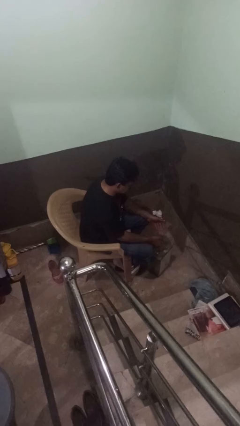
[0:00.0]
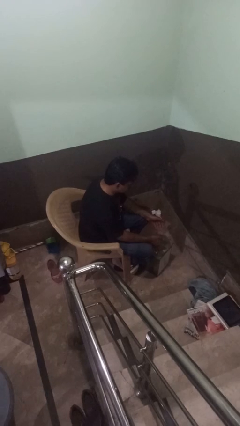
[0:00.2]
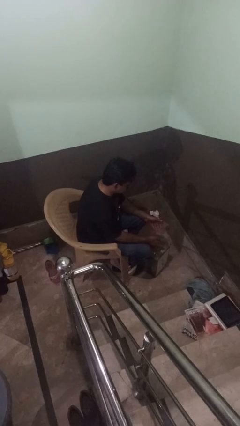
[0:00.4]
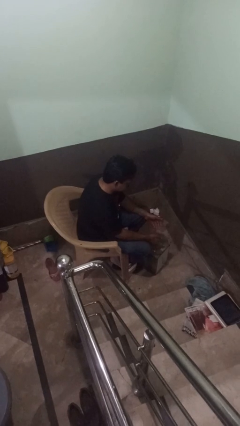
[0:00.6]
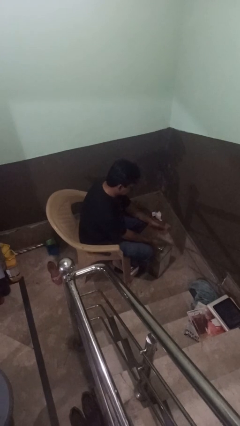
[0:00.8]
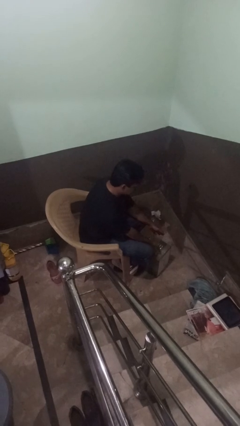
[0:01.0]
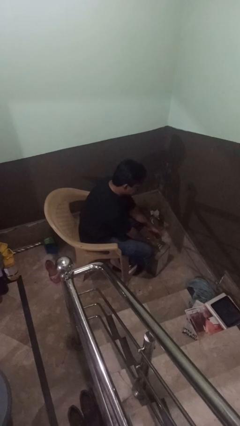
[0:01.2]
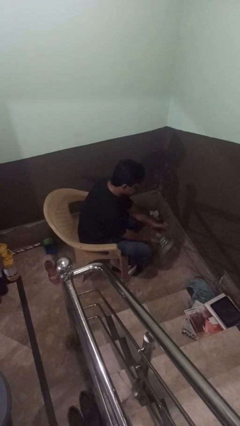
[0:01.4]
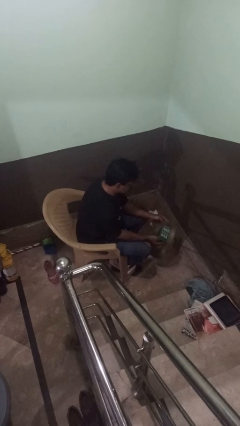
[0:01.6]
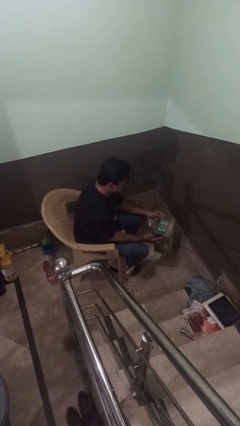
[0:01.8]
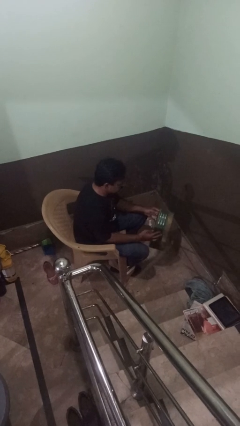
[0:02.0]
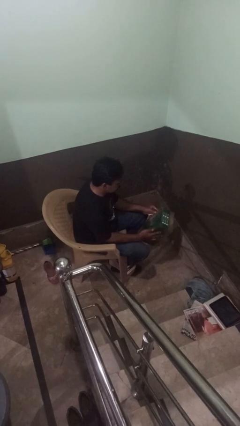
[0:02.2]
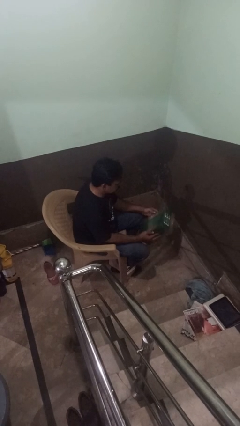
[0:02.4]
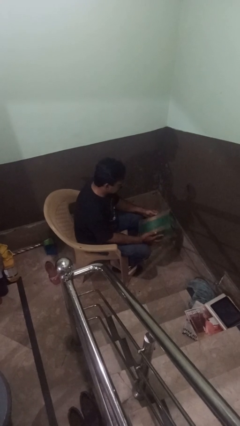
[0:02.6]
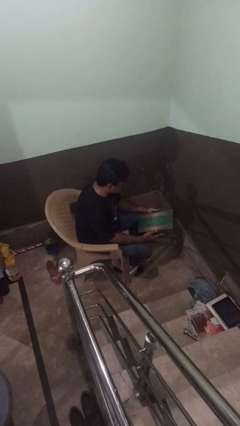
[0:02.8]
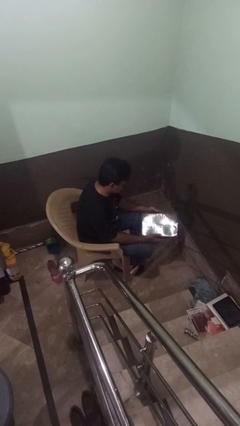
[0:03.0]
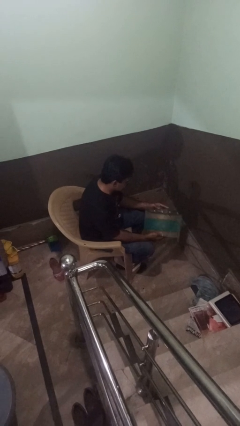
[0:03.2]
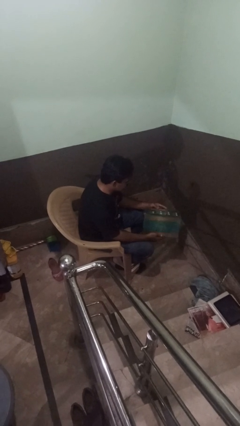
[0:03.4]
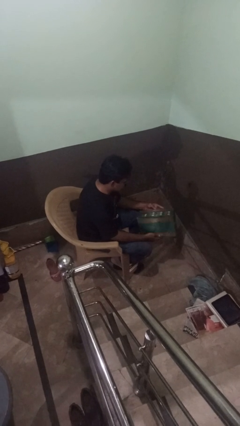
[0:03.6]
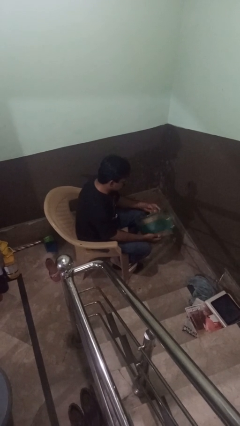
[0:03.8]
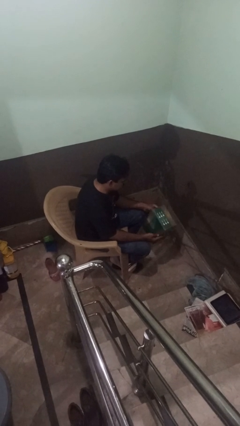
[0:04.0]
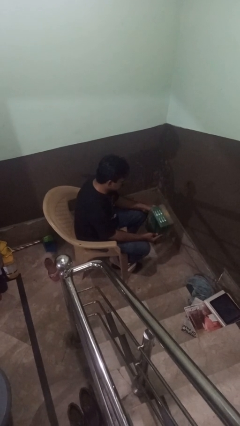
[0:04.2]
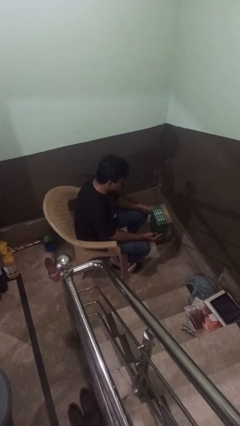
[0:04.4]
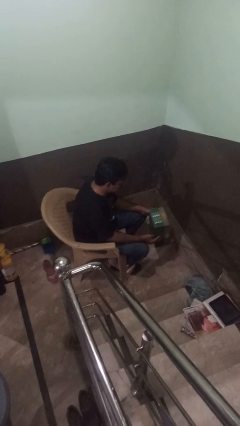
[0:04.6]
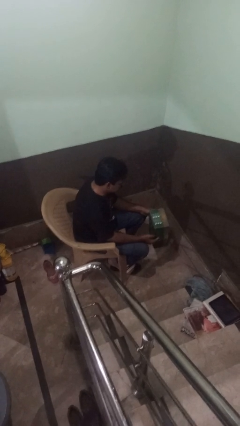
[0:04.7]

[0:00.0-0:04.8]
person picks up object from floor

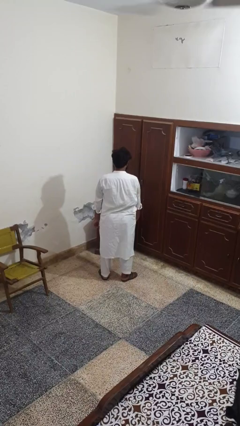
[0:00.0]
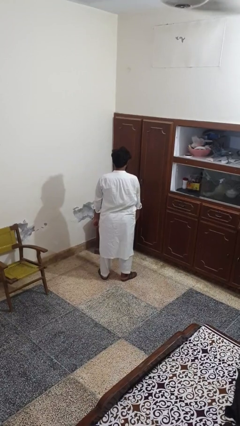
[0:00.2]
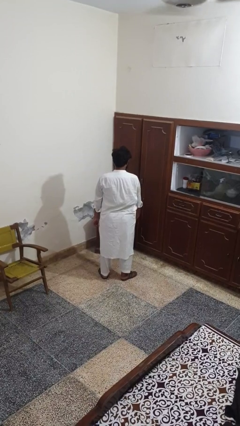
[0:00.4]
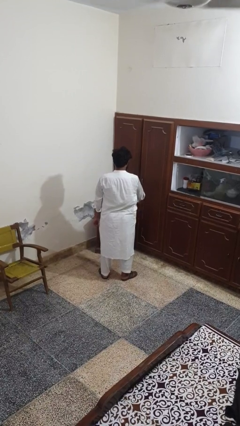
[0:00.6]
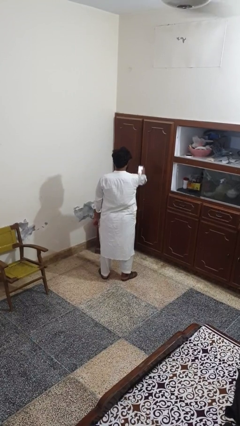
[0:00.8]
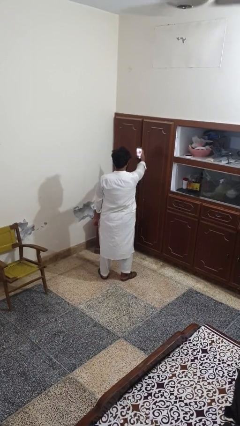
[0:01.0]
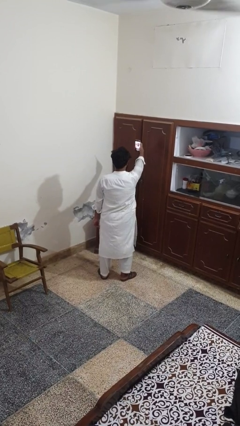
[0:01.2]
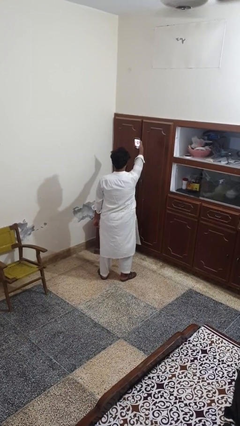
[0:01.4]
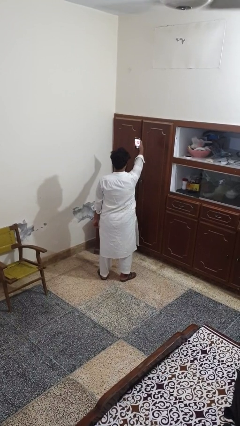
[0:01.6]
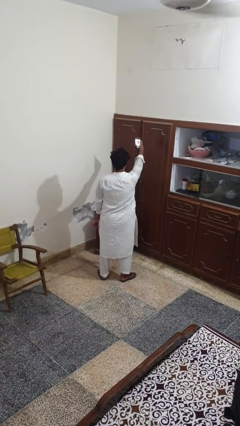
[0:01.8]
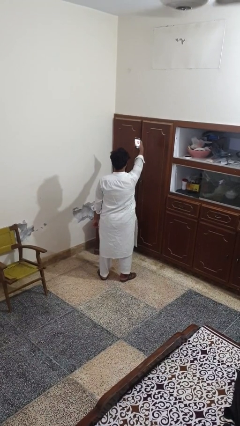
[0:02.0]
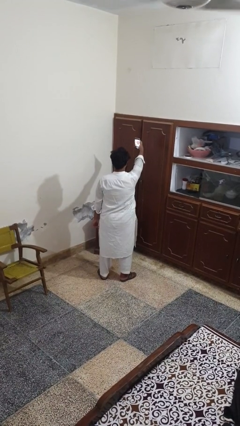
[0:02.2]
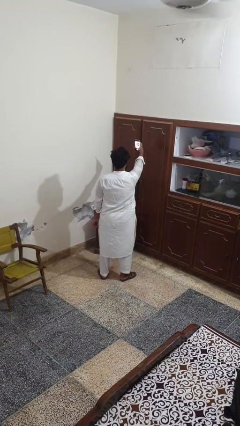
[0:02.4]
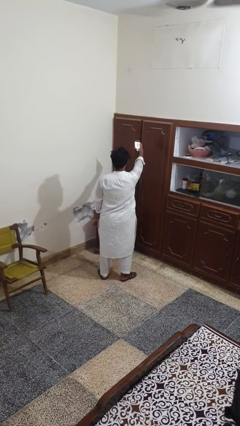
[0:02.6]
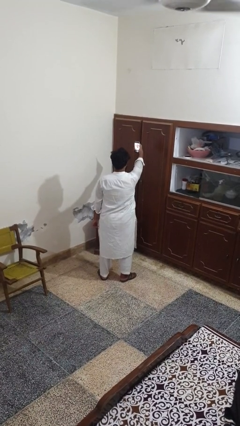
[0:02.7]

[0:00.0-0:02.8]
person takes selfie

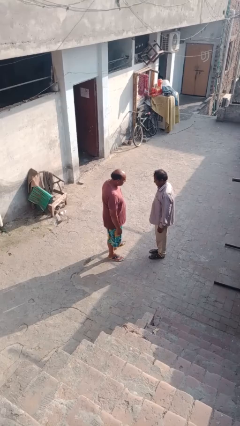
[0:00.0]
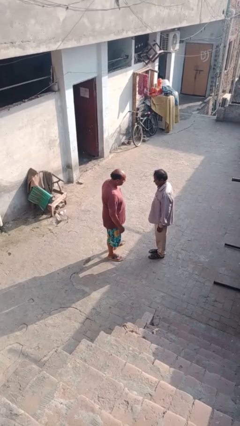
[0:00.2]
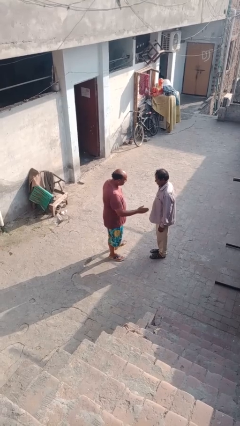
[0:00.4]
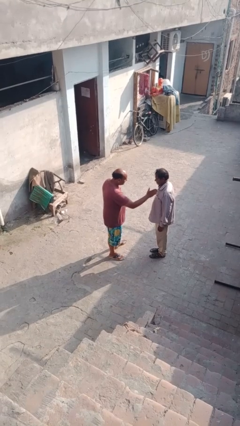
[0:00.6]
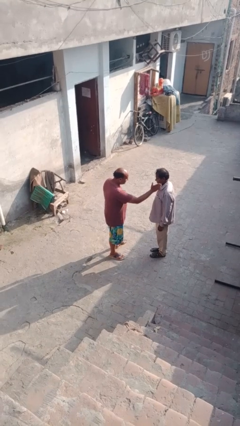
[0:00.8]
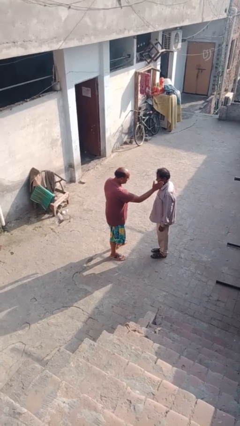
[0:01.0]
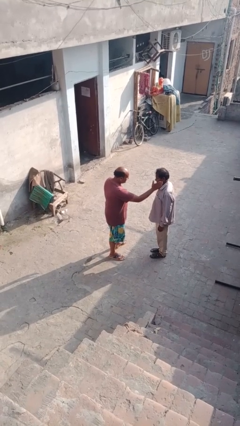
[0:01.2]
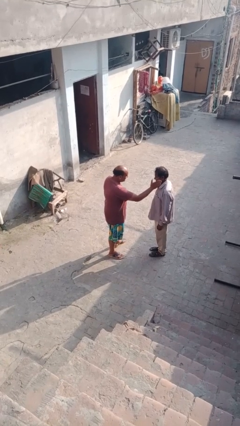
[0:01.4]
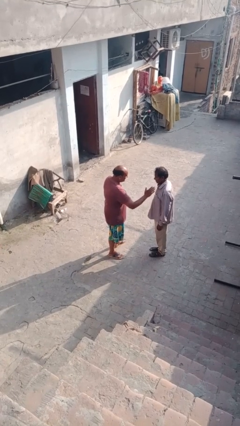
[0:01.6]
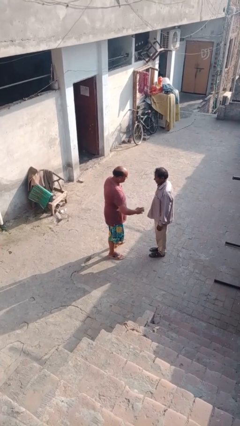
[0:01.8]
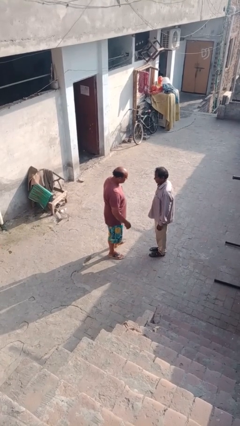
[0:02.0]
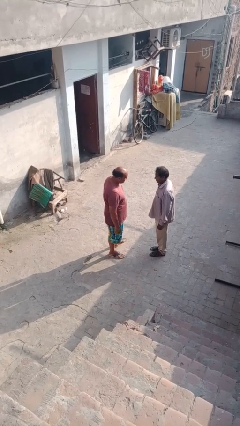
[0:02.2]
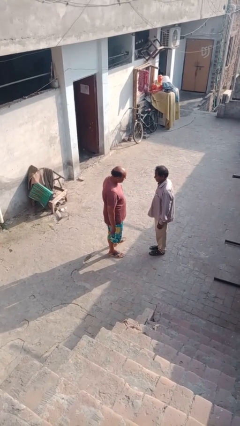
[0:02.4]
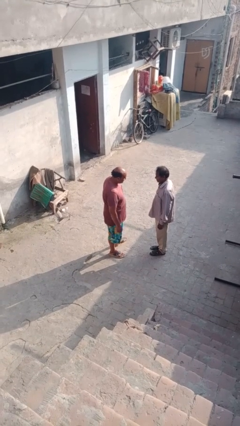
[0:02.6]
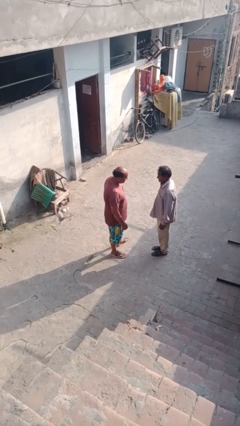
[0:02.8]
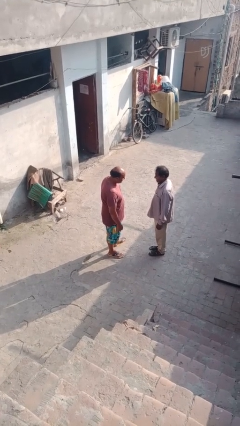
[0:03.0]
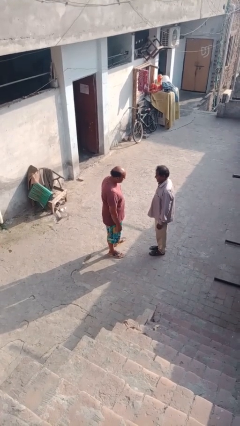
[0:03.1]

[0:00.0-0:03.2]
person touches face of person

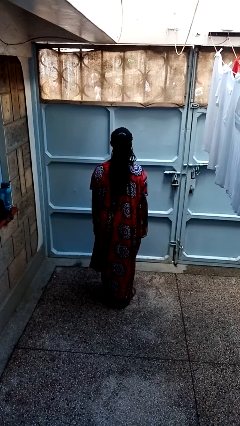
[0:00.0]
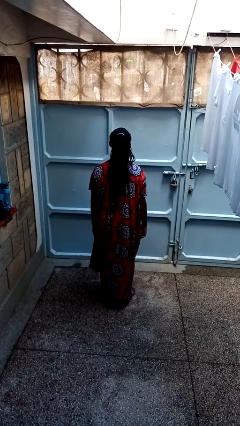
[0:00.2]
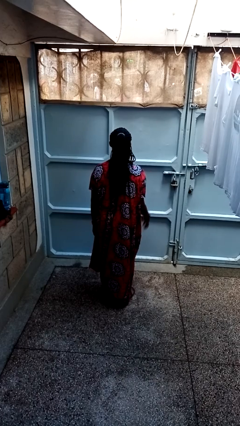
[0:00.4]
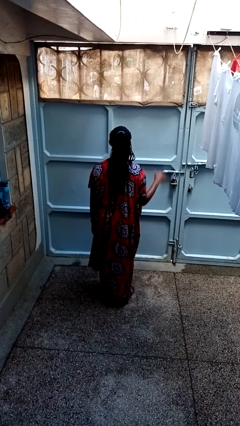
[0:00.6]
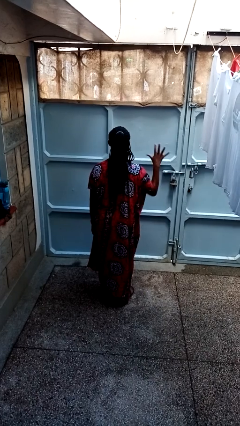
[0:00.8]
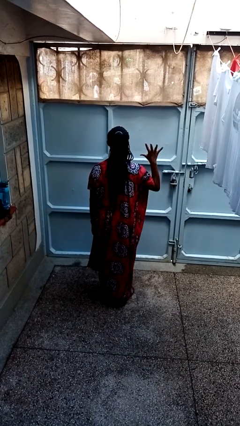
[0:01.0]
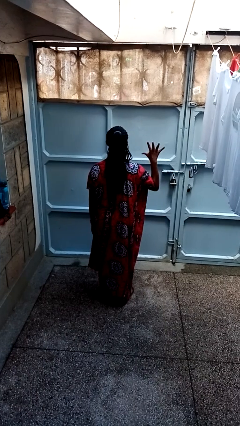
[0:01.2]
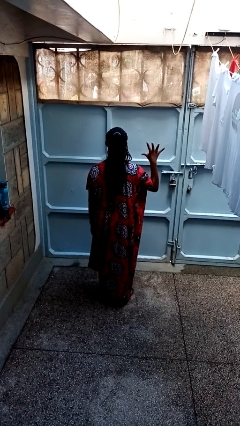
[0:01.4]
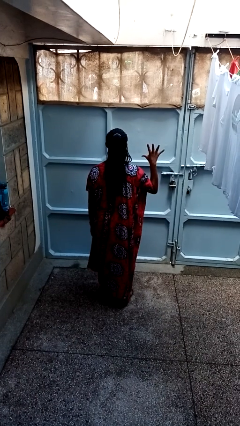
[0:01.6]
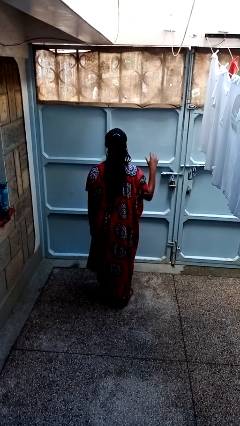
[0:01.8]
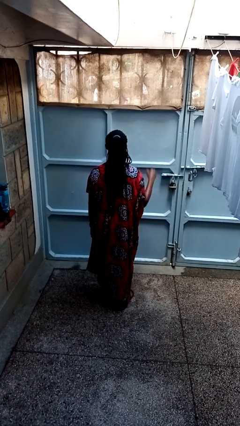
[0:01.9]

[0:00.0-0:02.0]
person gestures number five

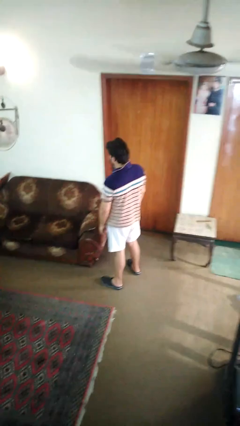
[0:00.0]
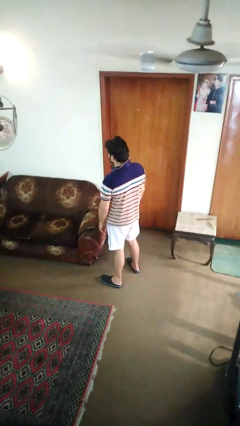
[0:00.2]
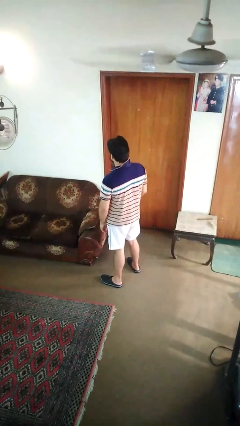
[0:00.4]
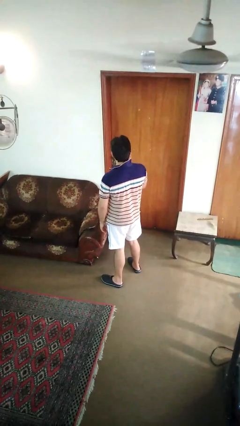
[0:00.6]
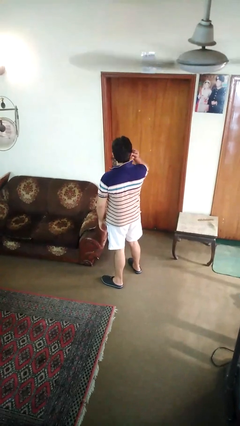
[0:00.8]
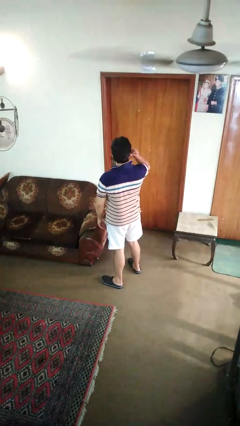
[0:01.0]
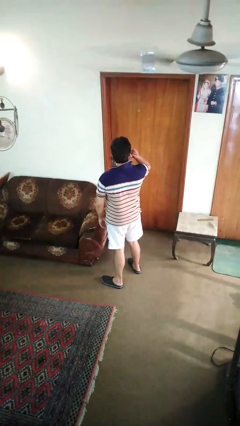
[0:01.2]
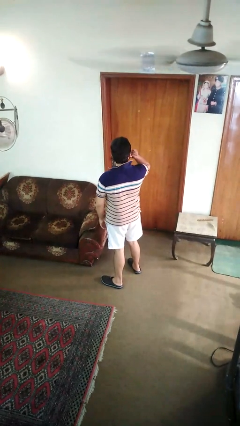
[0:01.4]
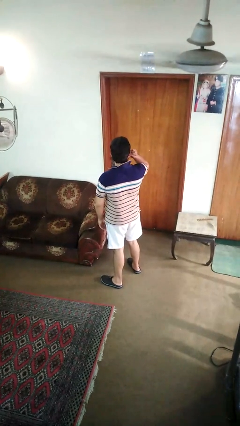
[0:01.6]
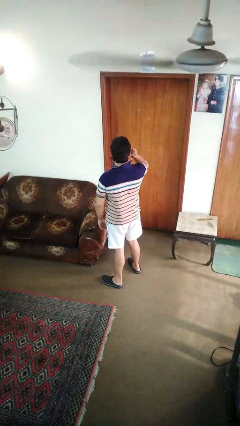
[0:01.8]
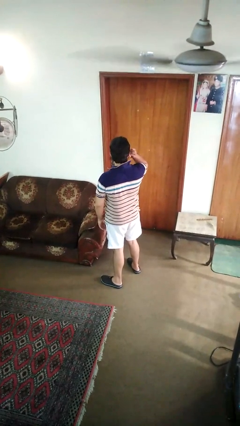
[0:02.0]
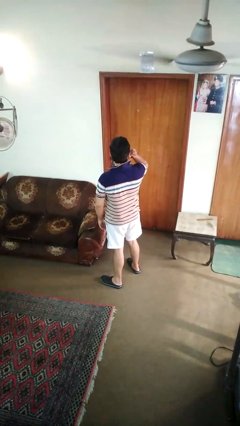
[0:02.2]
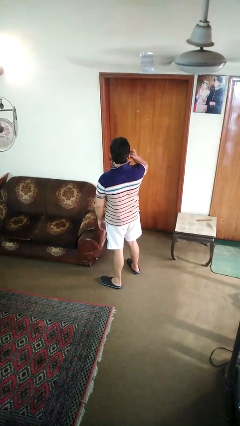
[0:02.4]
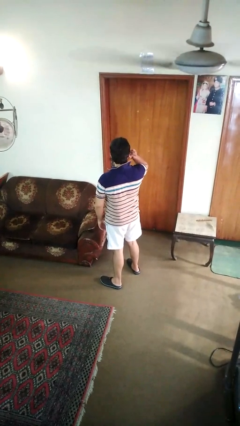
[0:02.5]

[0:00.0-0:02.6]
person touches earlobe

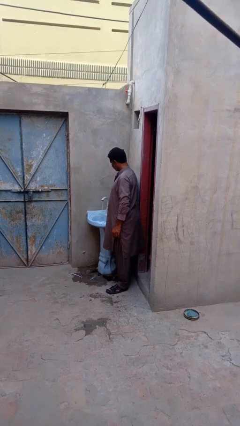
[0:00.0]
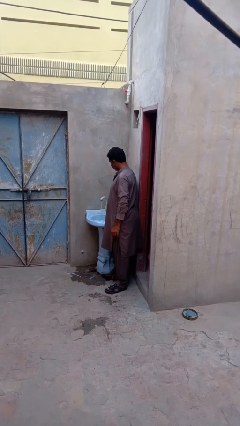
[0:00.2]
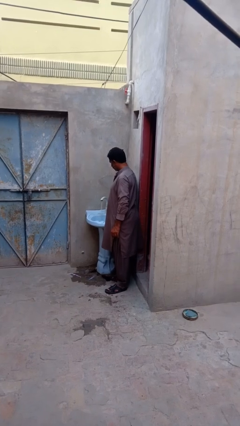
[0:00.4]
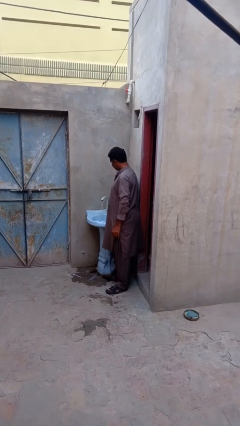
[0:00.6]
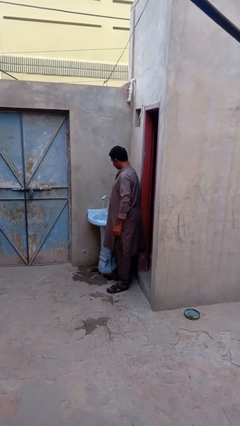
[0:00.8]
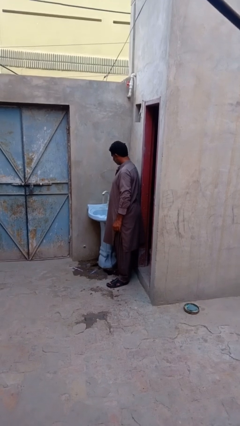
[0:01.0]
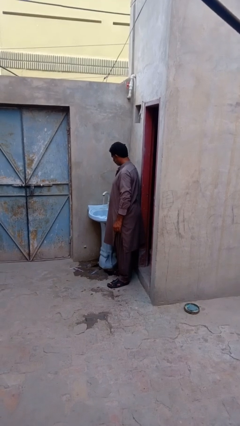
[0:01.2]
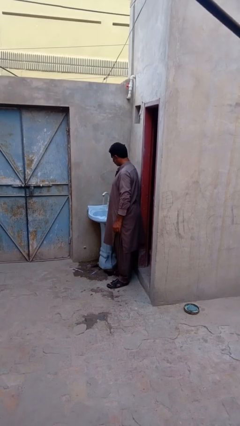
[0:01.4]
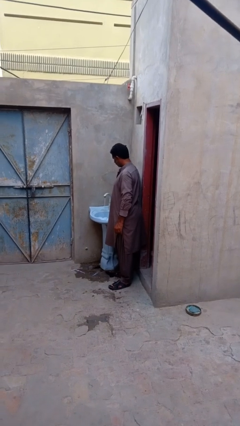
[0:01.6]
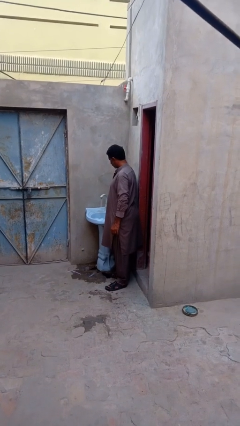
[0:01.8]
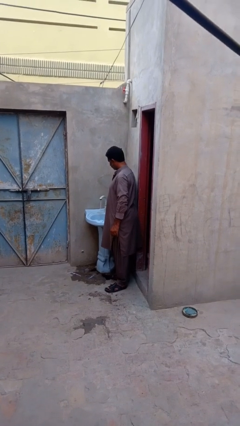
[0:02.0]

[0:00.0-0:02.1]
person turns on faucet

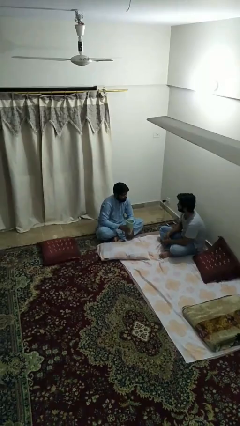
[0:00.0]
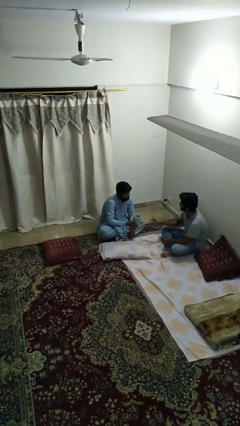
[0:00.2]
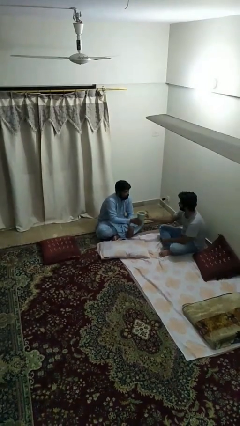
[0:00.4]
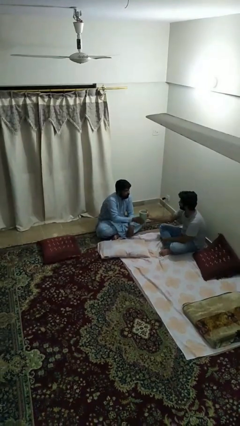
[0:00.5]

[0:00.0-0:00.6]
person transfers object to person
